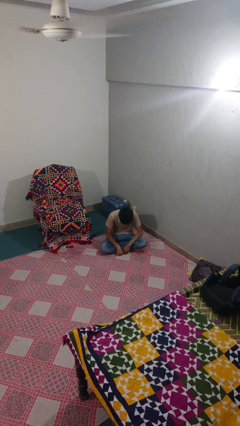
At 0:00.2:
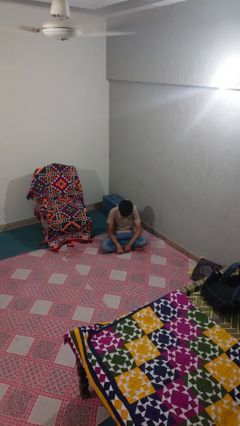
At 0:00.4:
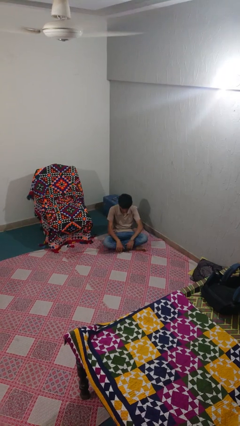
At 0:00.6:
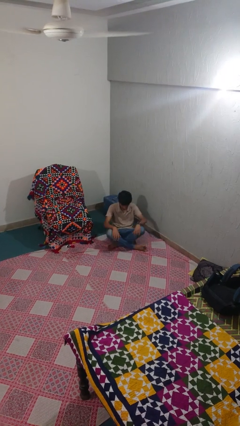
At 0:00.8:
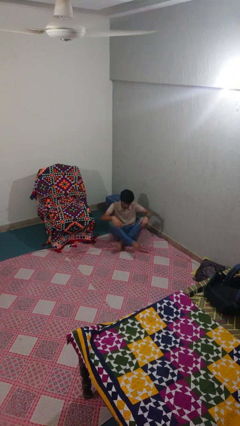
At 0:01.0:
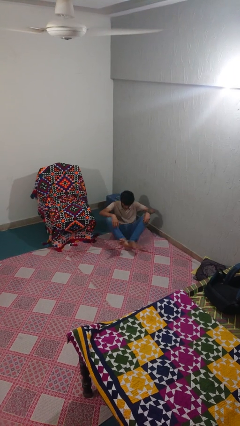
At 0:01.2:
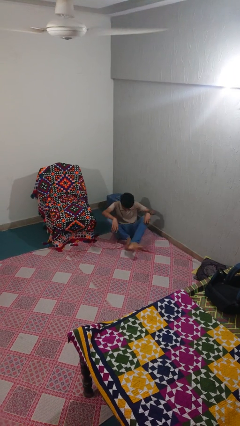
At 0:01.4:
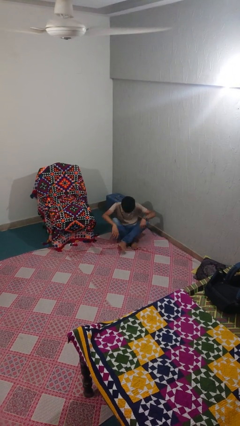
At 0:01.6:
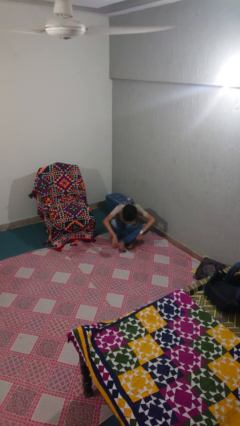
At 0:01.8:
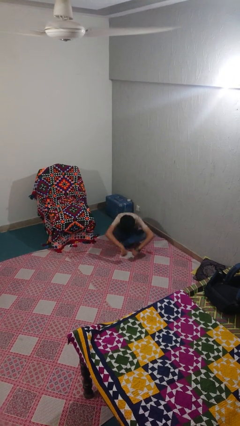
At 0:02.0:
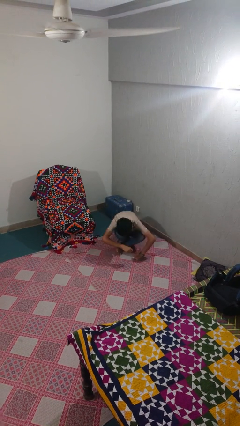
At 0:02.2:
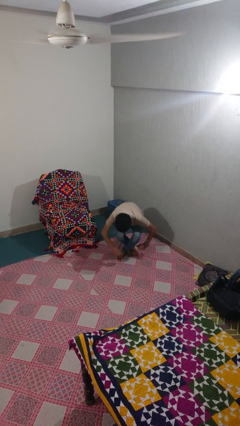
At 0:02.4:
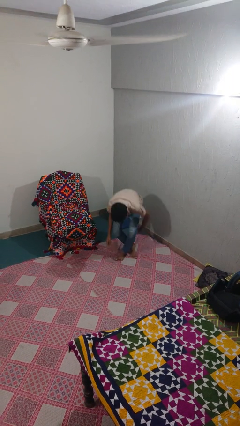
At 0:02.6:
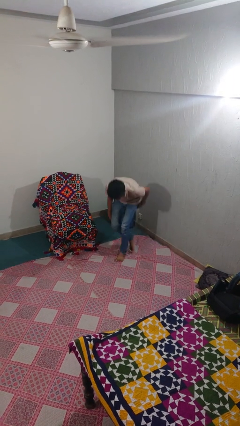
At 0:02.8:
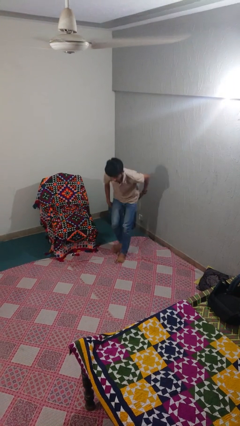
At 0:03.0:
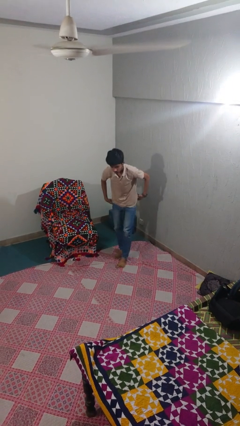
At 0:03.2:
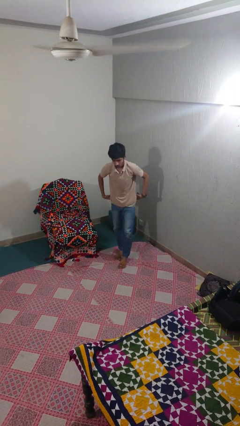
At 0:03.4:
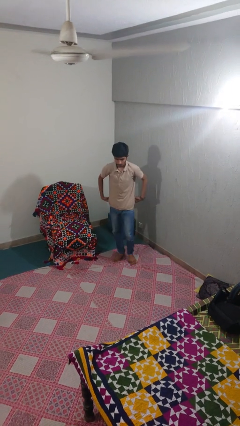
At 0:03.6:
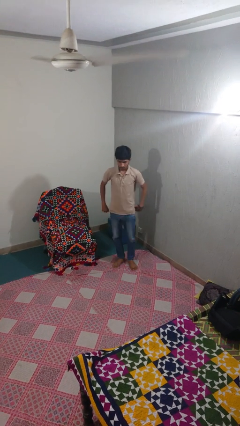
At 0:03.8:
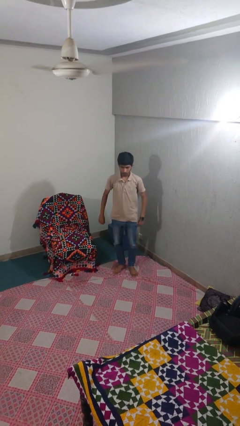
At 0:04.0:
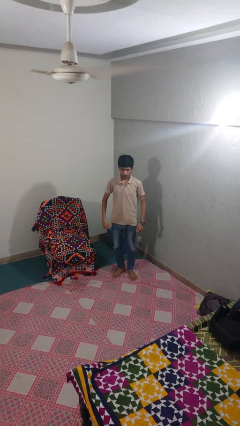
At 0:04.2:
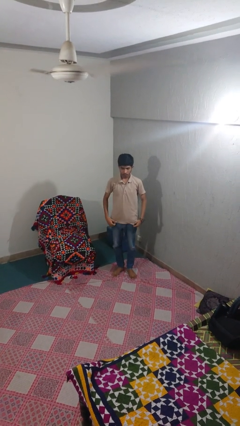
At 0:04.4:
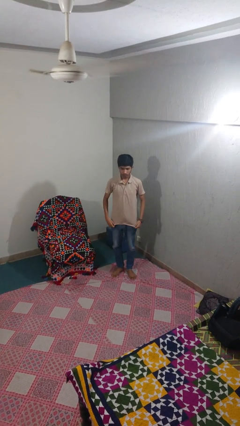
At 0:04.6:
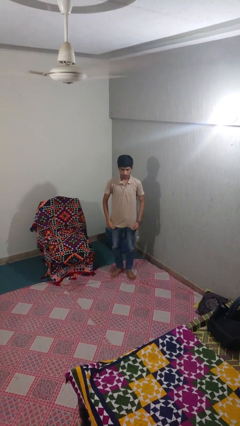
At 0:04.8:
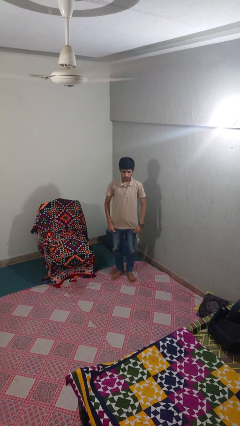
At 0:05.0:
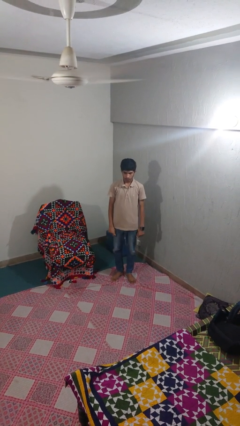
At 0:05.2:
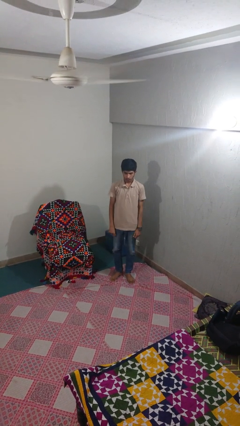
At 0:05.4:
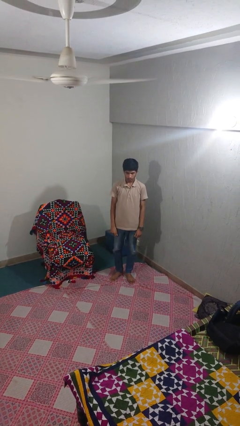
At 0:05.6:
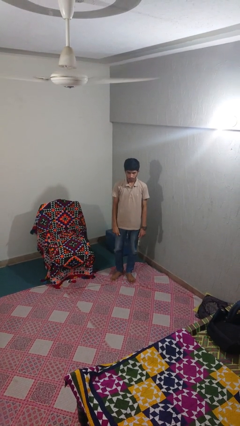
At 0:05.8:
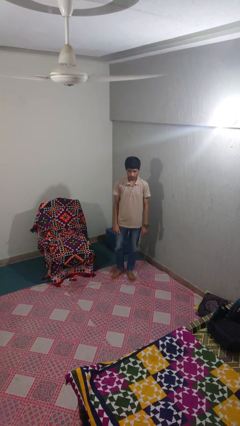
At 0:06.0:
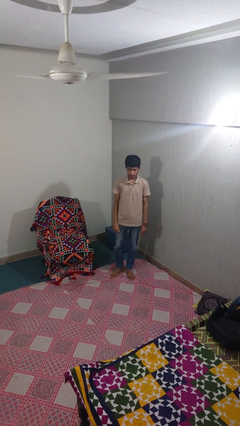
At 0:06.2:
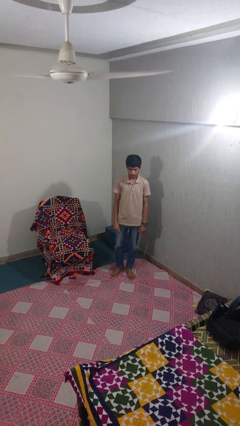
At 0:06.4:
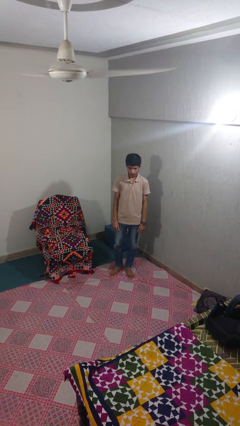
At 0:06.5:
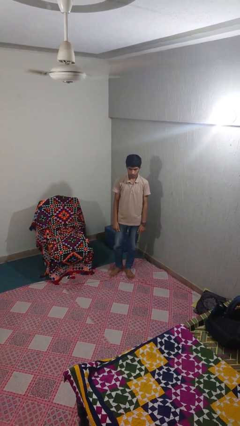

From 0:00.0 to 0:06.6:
person stands up from floor

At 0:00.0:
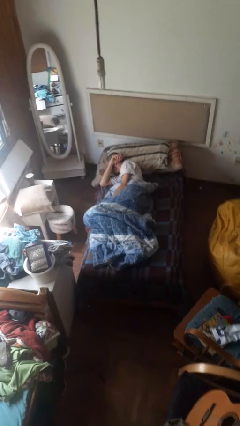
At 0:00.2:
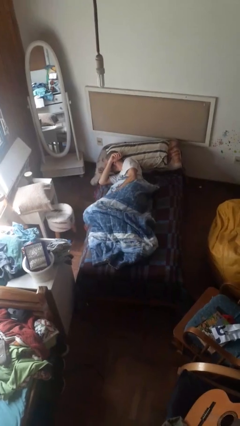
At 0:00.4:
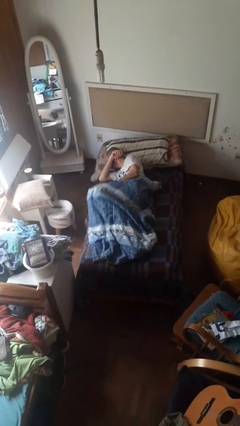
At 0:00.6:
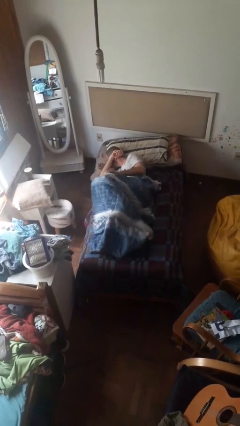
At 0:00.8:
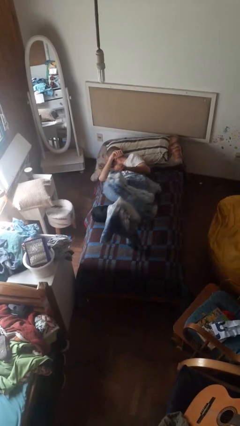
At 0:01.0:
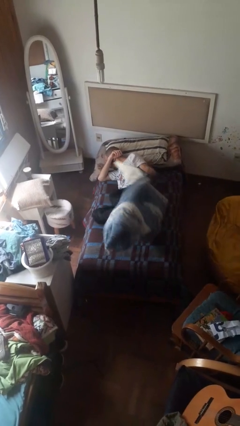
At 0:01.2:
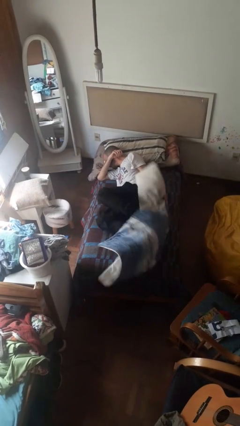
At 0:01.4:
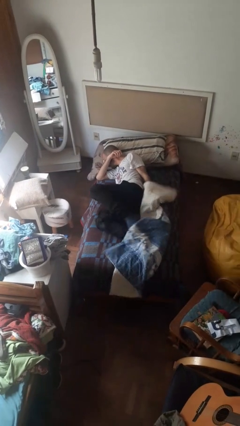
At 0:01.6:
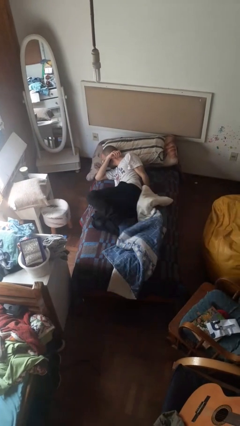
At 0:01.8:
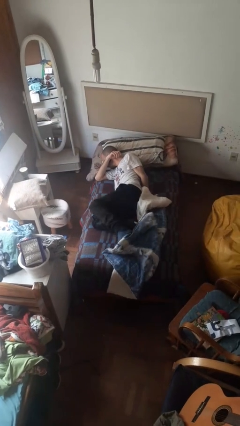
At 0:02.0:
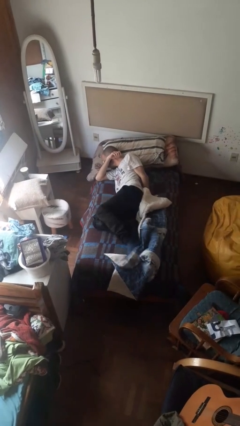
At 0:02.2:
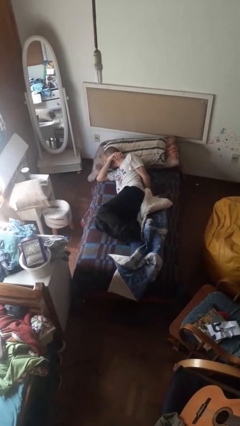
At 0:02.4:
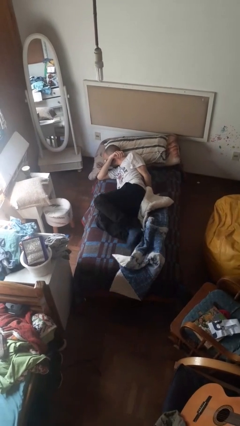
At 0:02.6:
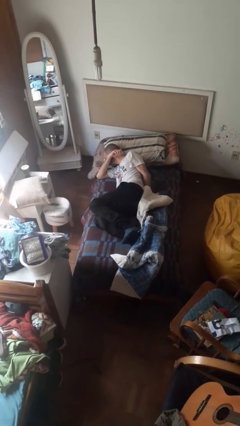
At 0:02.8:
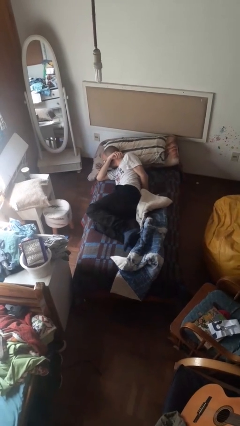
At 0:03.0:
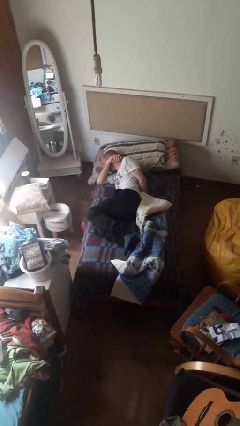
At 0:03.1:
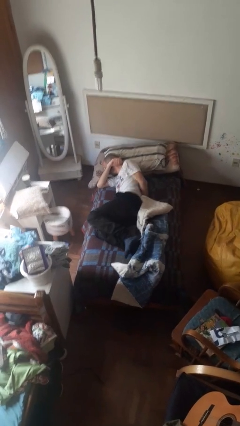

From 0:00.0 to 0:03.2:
person uncovers with bedsheets

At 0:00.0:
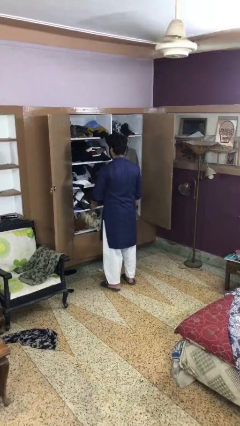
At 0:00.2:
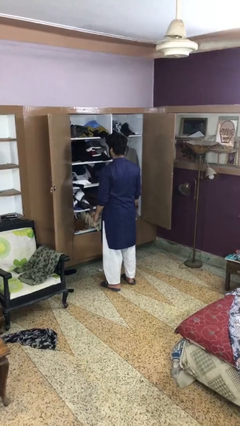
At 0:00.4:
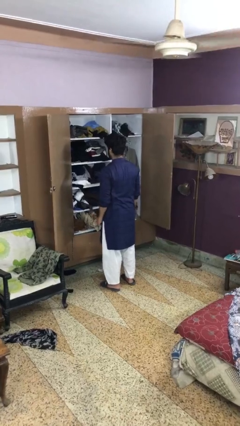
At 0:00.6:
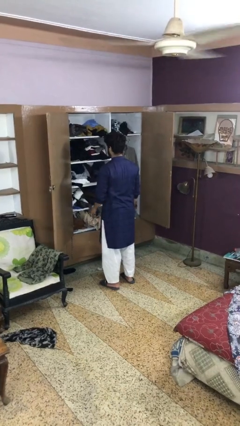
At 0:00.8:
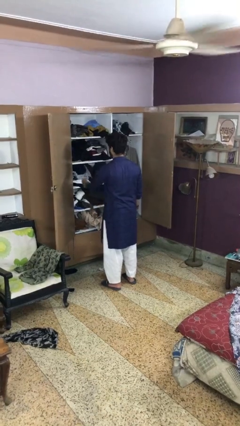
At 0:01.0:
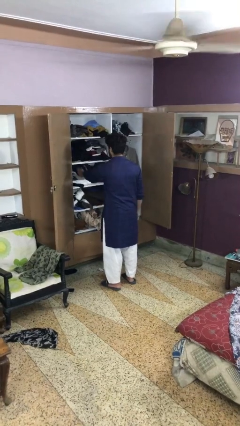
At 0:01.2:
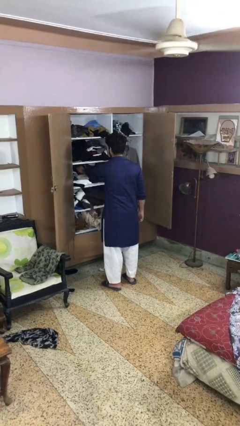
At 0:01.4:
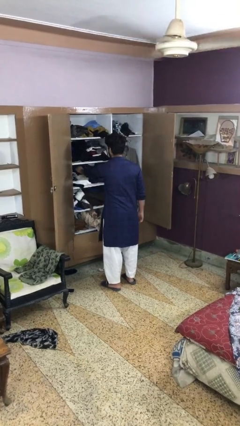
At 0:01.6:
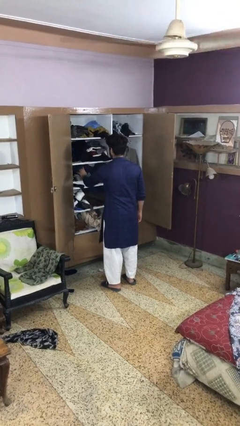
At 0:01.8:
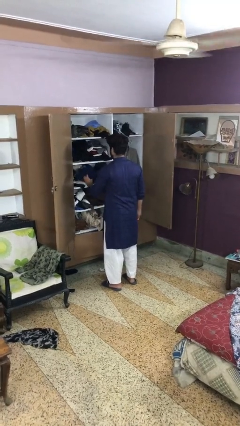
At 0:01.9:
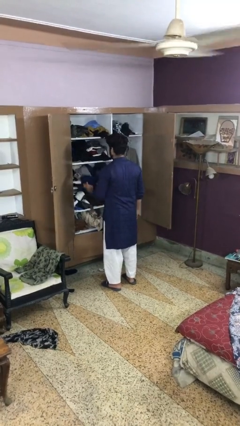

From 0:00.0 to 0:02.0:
person takes clothes from dresser

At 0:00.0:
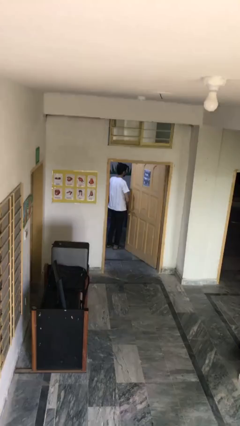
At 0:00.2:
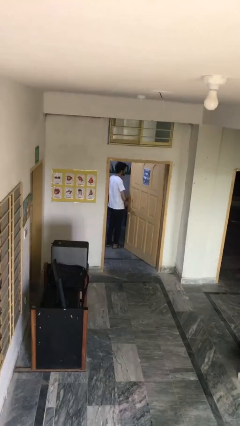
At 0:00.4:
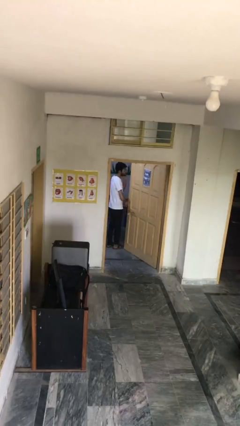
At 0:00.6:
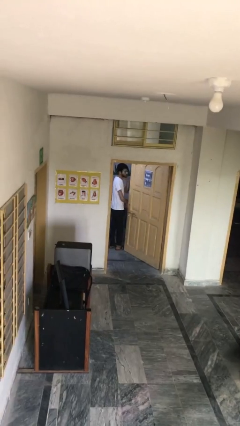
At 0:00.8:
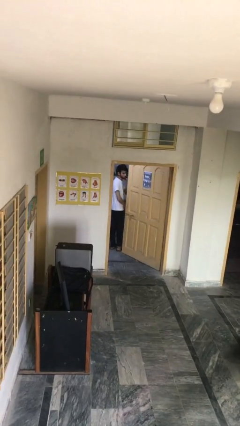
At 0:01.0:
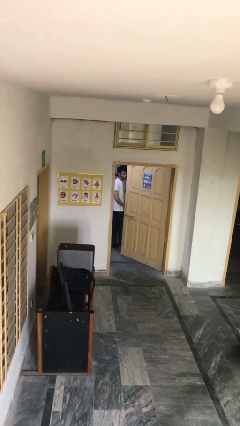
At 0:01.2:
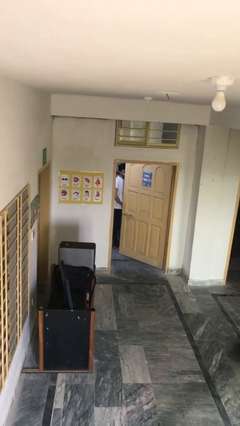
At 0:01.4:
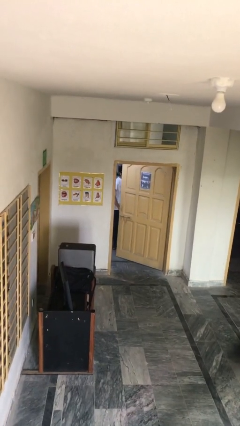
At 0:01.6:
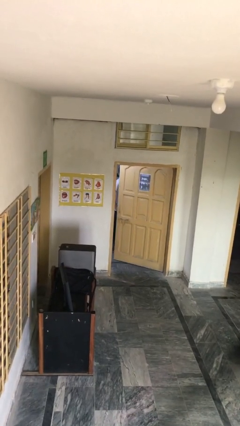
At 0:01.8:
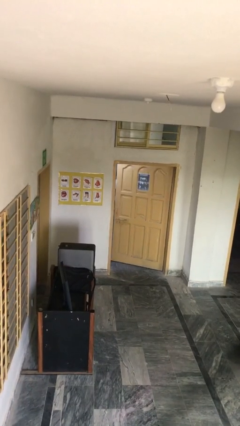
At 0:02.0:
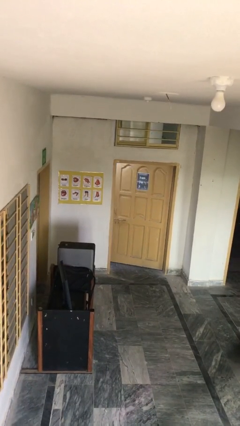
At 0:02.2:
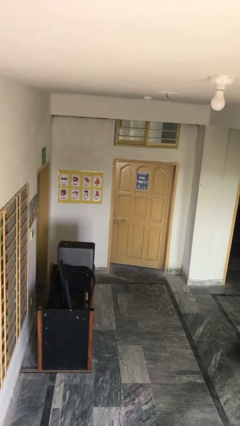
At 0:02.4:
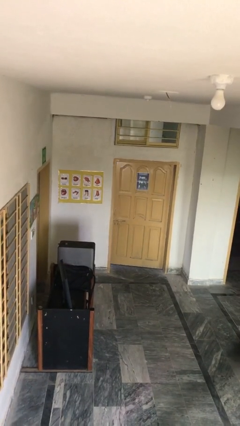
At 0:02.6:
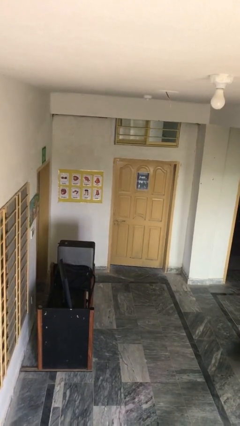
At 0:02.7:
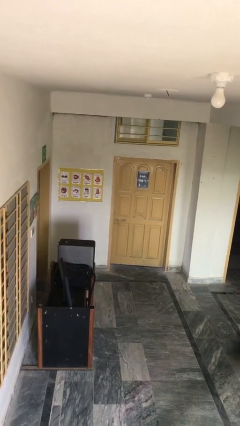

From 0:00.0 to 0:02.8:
person closes facility door

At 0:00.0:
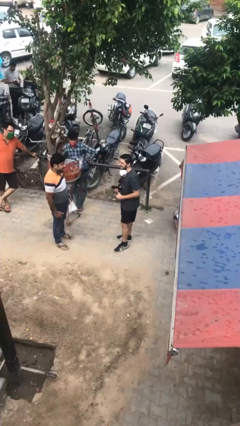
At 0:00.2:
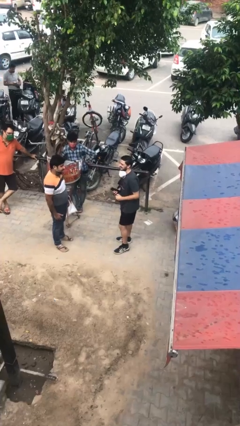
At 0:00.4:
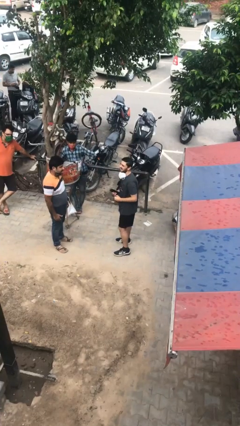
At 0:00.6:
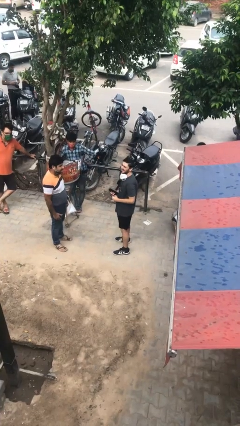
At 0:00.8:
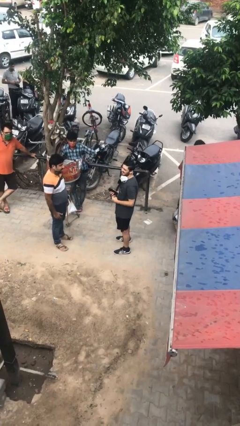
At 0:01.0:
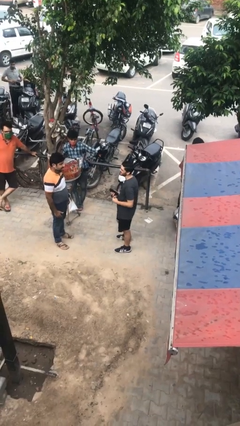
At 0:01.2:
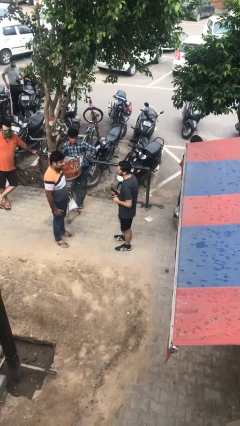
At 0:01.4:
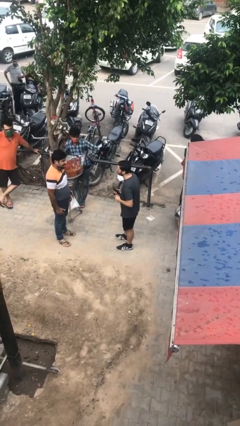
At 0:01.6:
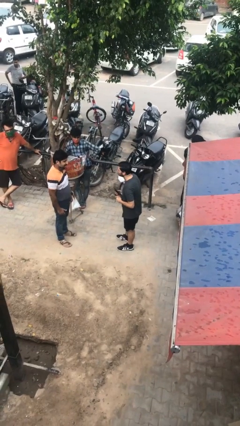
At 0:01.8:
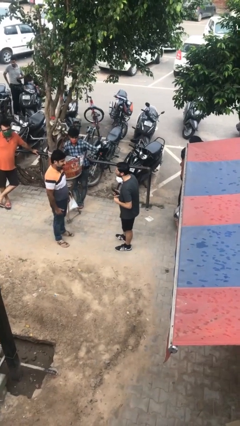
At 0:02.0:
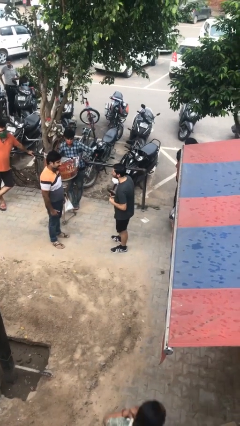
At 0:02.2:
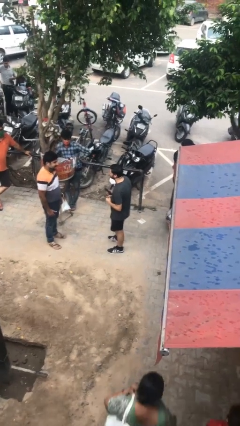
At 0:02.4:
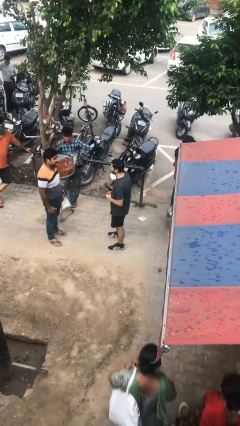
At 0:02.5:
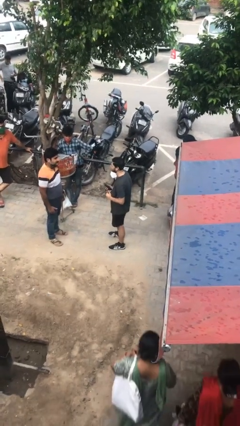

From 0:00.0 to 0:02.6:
person laughs with person

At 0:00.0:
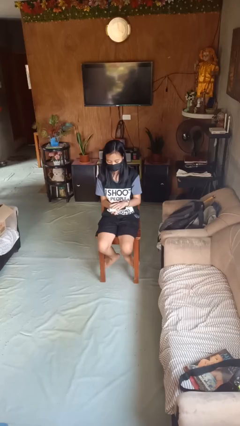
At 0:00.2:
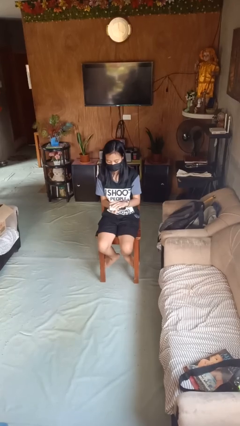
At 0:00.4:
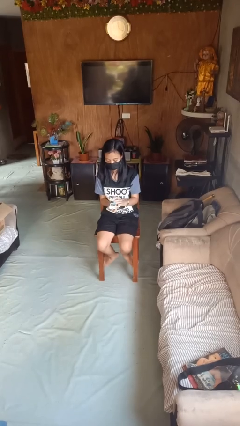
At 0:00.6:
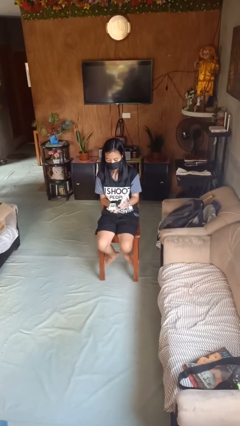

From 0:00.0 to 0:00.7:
person opens jewelry box
